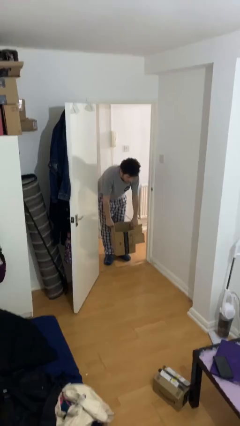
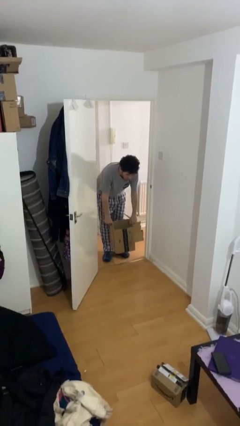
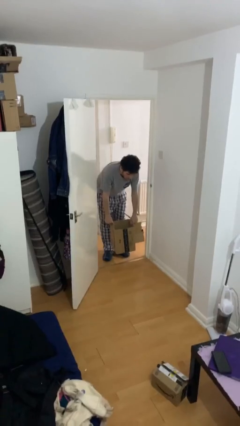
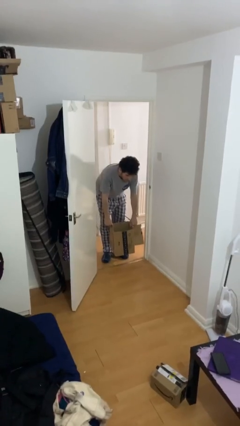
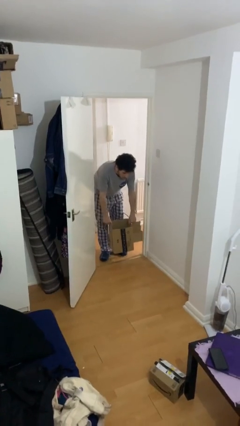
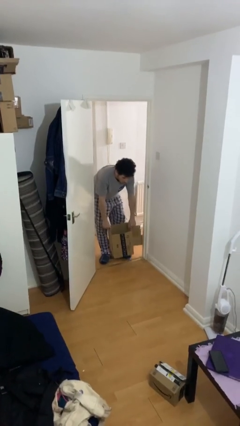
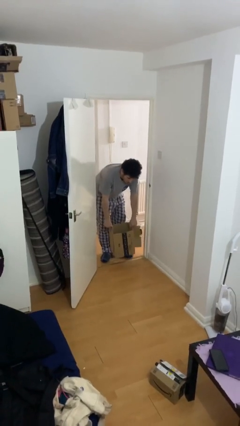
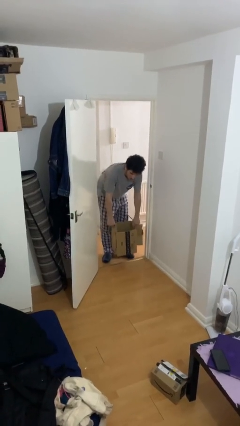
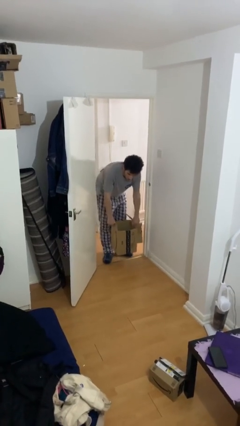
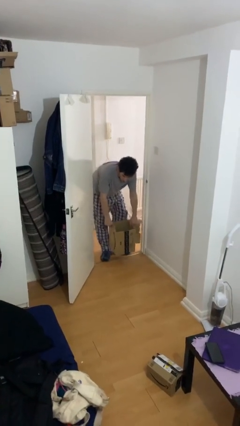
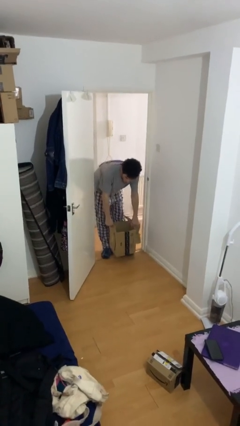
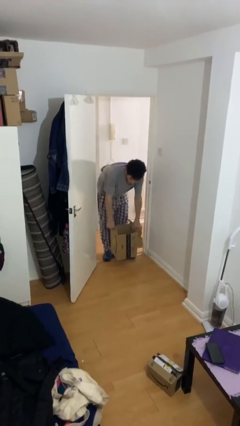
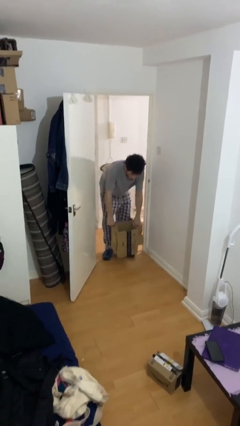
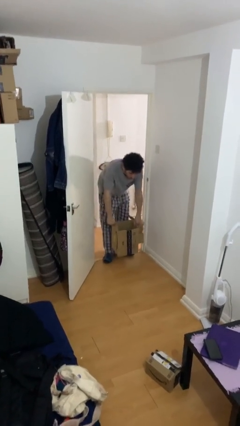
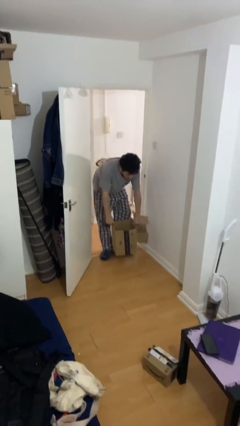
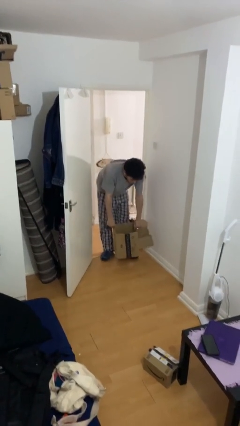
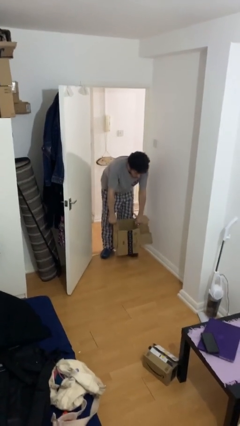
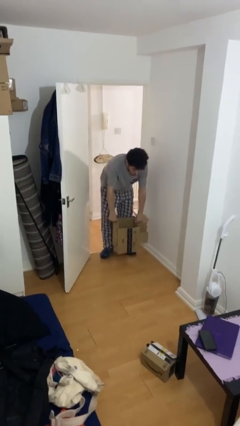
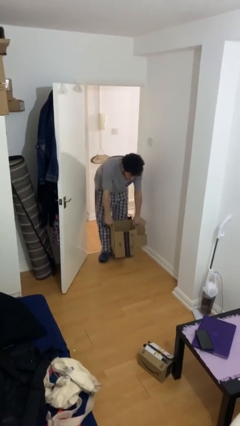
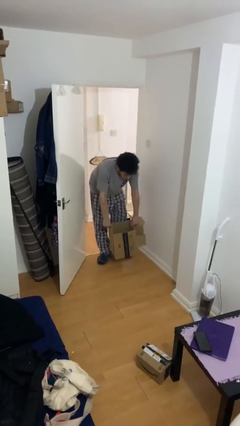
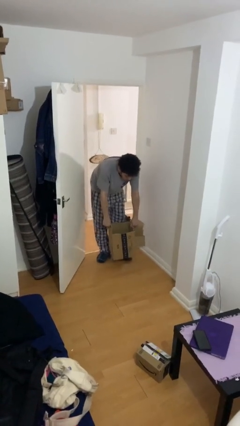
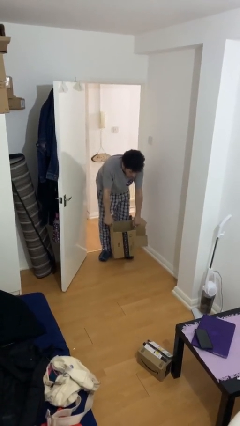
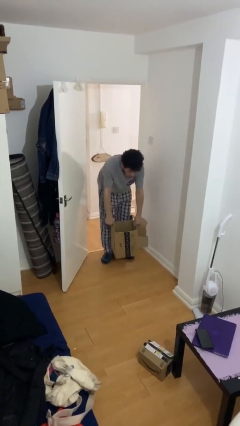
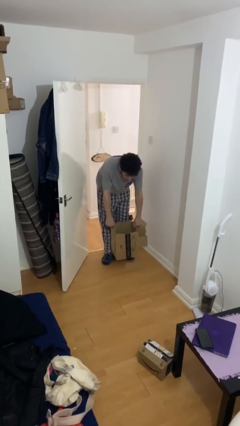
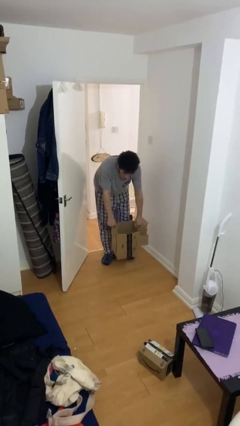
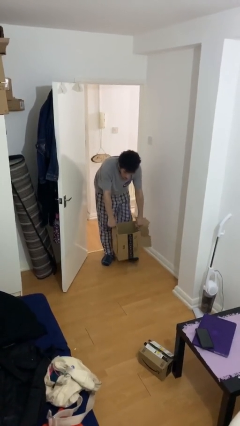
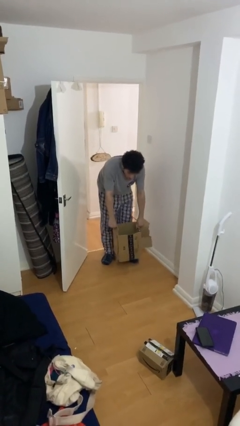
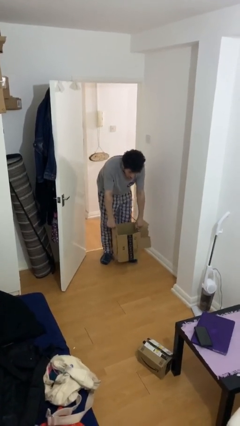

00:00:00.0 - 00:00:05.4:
person carries heavy object

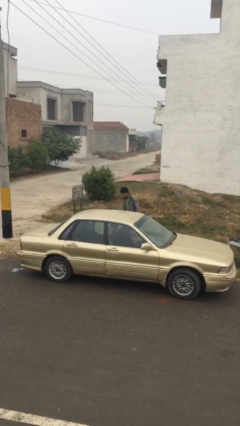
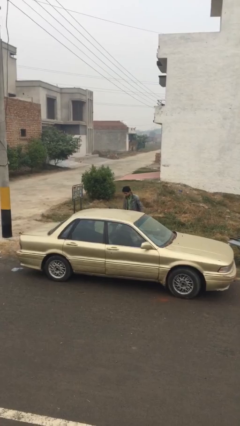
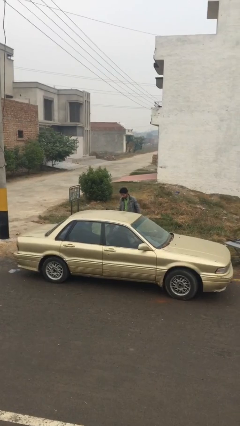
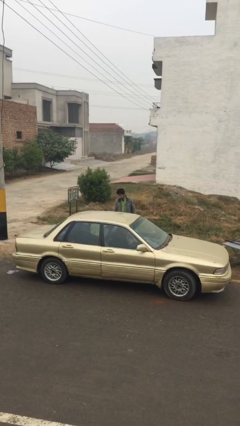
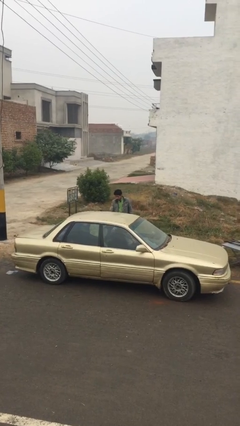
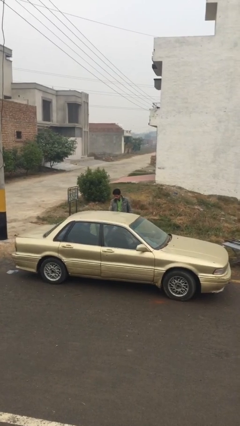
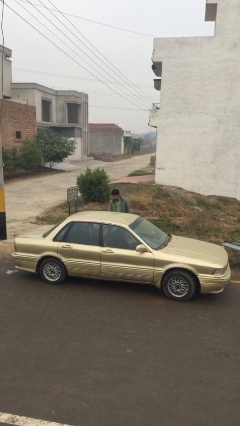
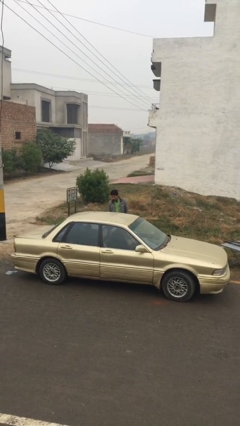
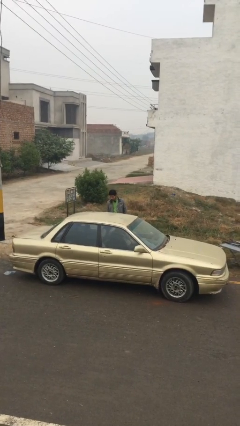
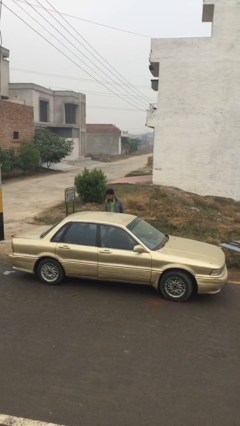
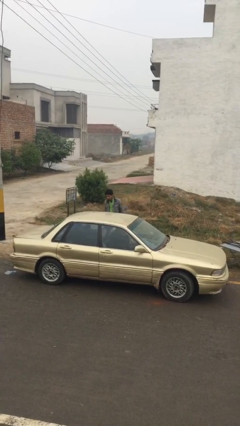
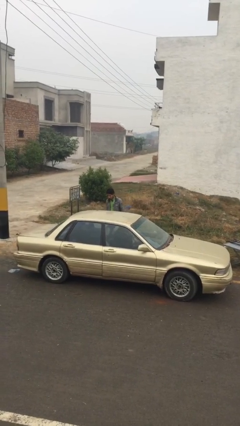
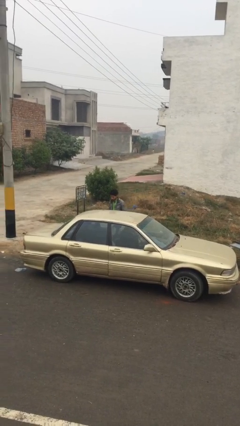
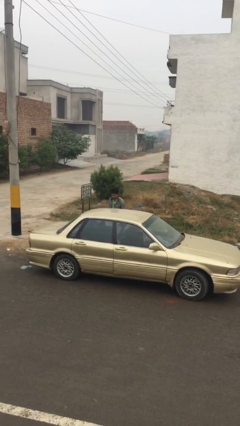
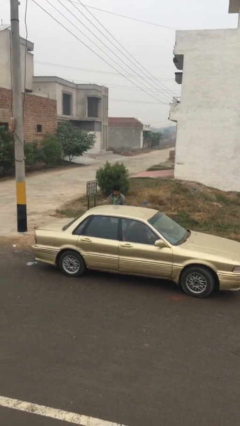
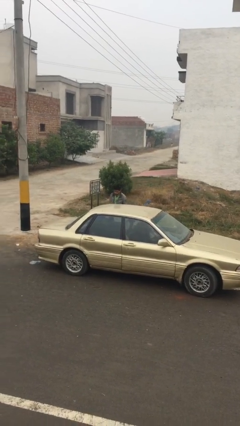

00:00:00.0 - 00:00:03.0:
person closes car door

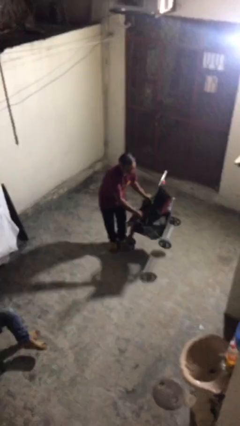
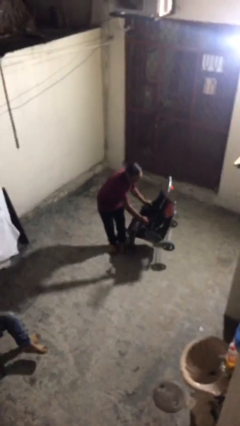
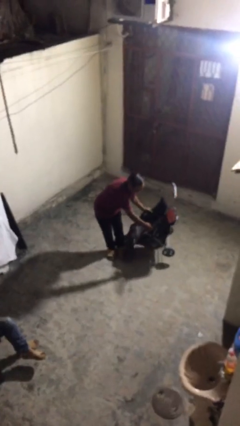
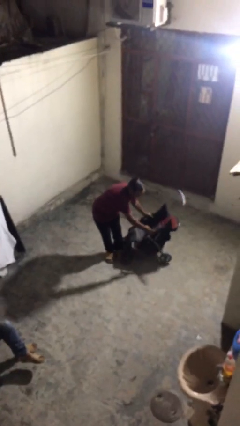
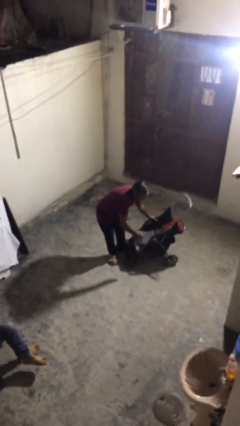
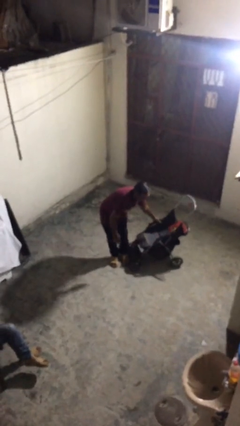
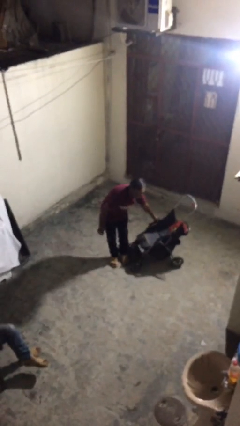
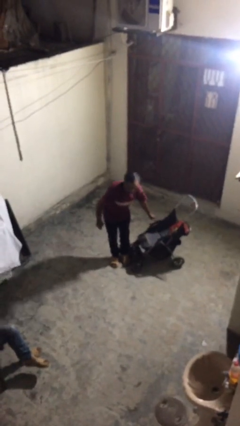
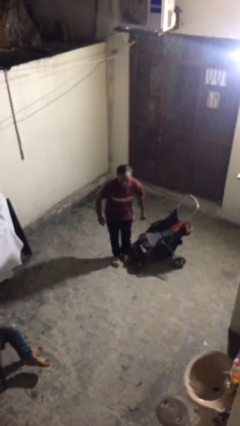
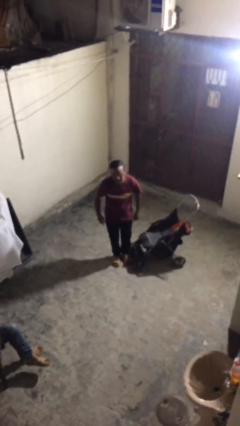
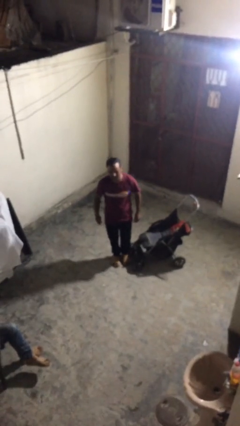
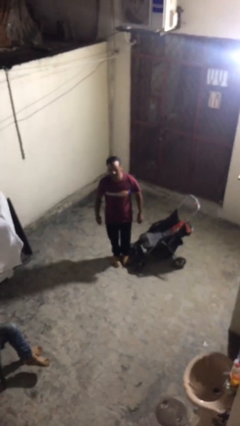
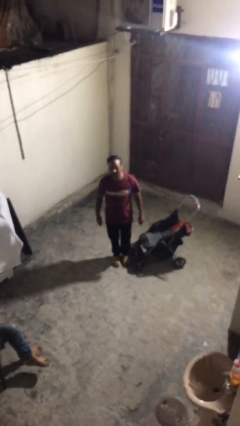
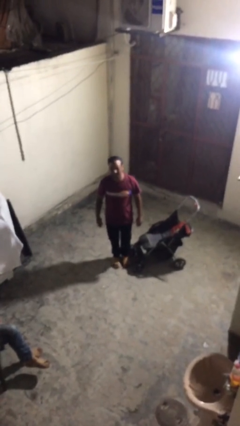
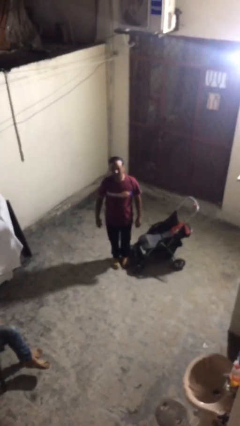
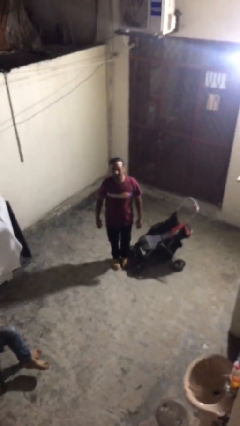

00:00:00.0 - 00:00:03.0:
person puts down object on floor

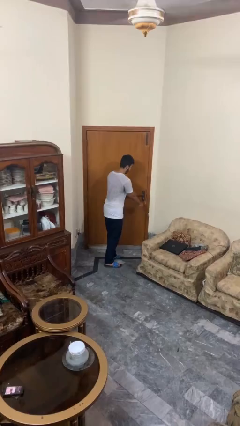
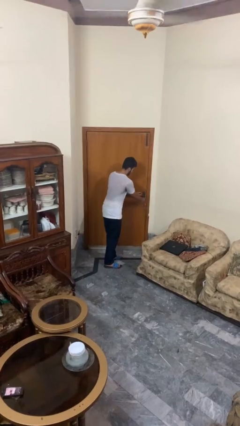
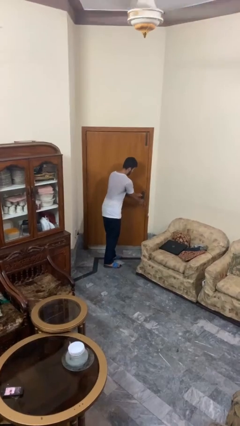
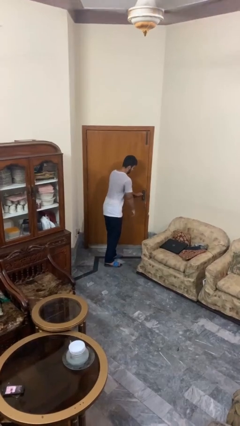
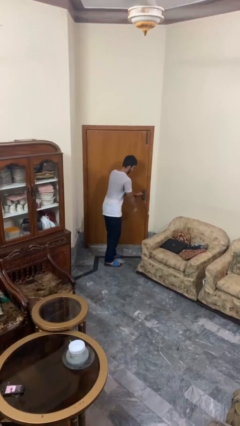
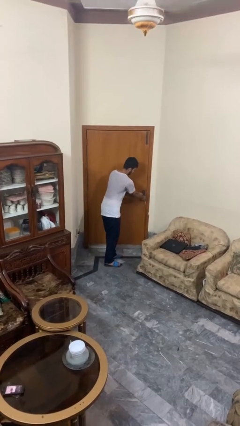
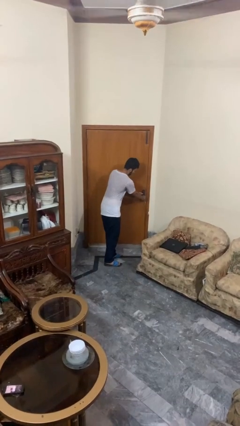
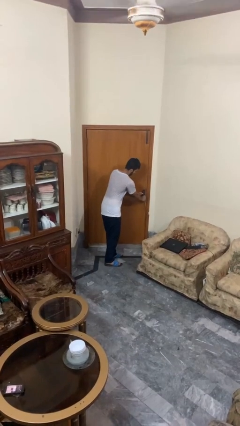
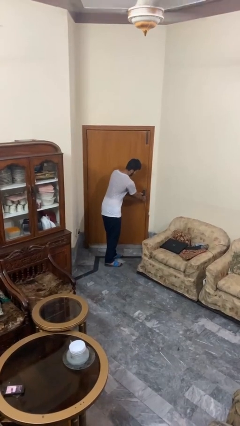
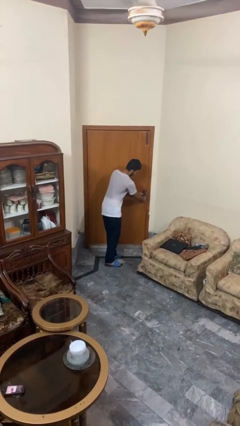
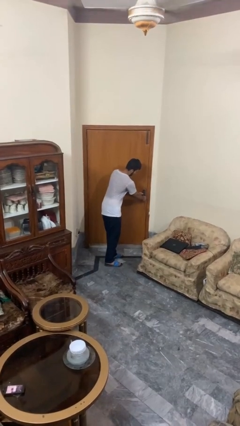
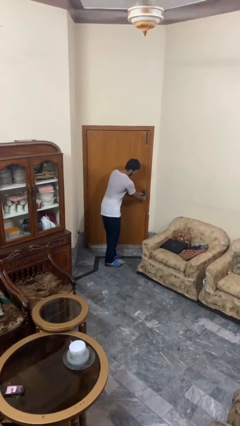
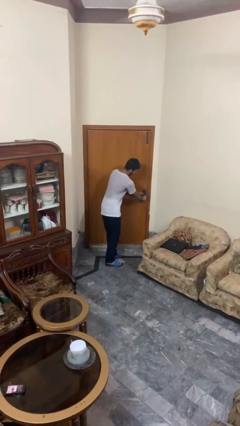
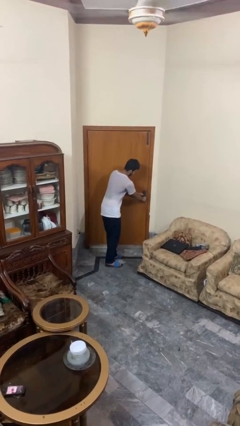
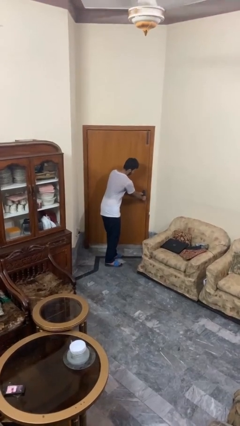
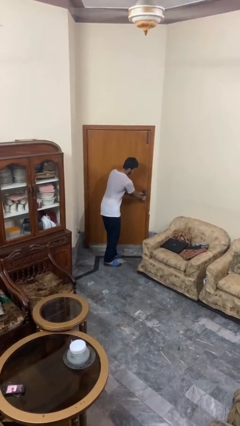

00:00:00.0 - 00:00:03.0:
person unlocks door with keys

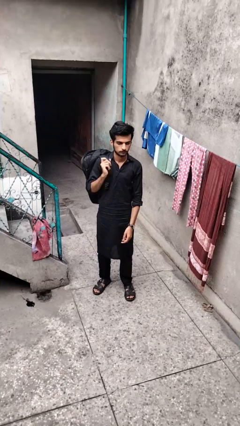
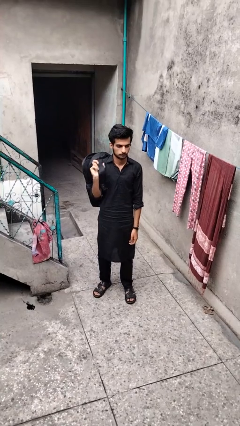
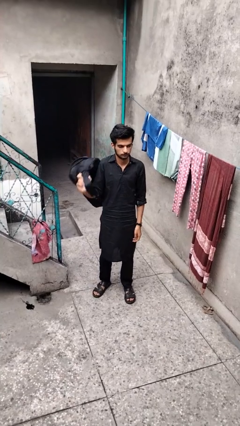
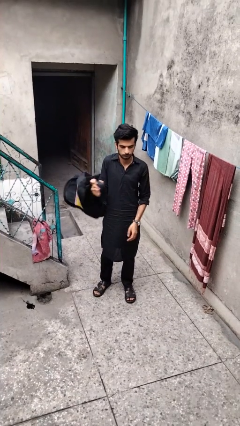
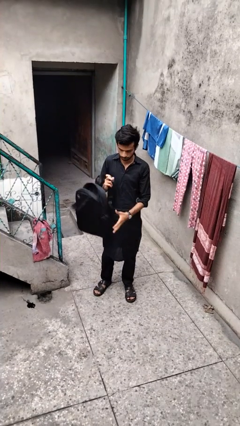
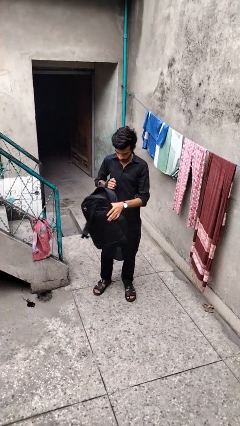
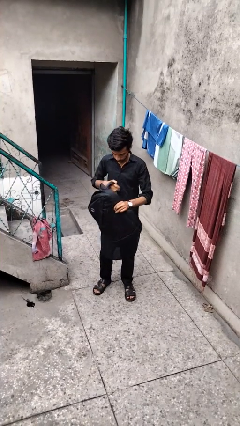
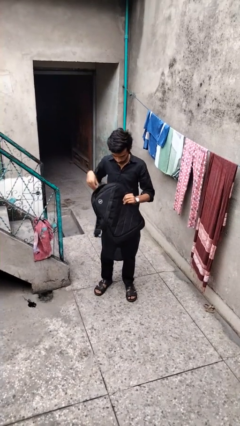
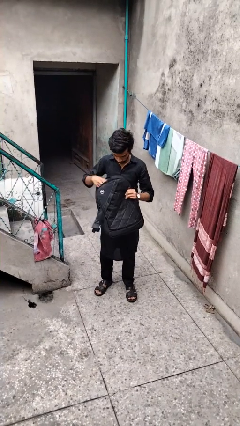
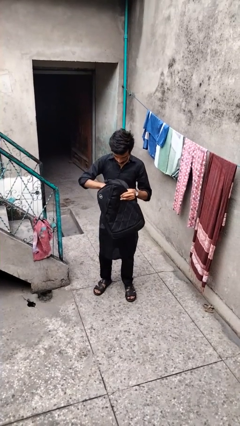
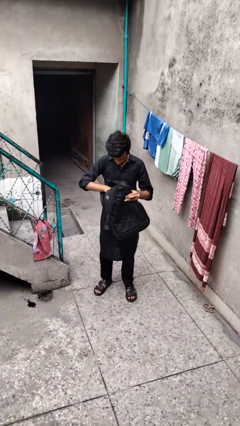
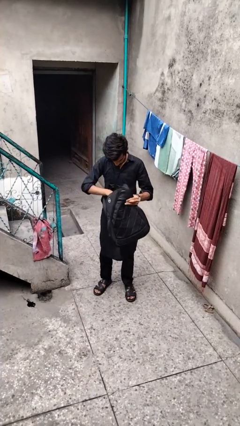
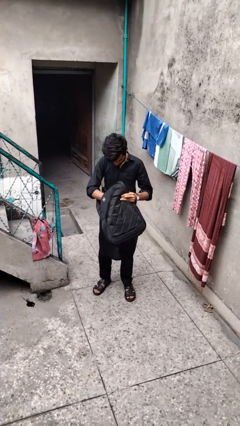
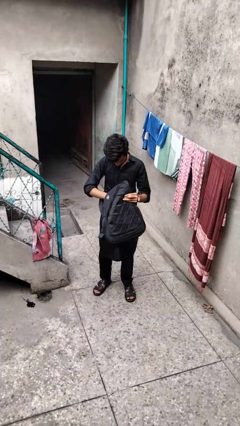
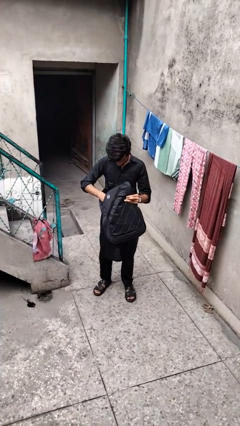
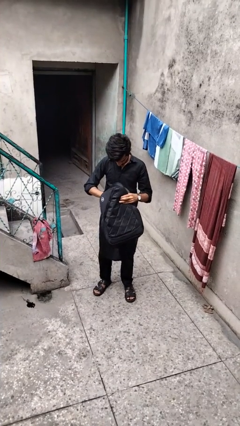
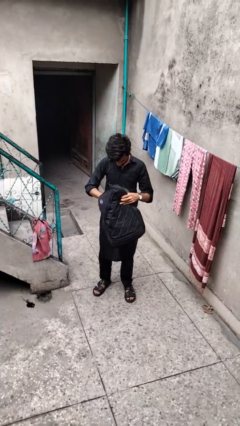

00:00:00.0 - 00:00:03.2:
person searches in backpack

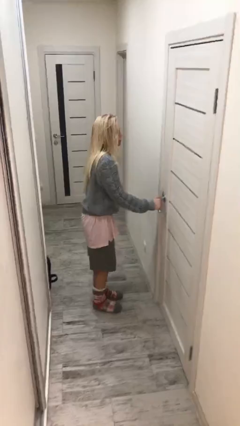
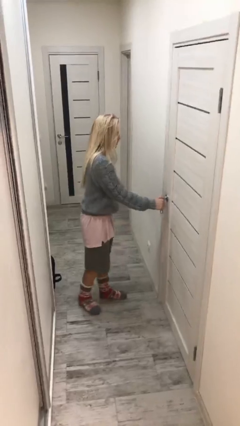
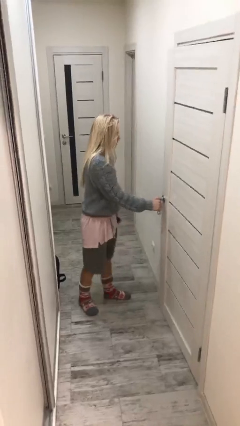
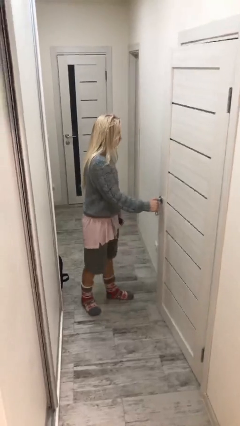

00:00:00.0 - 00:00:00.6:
person opens facility door
